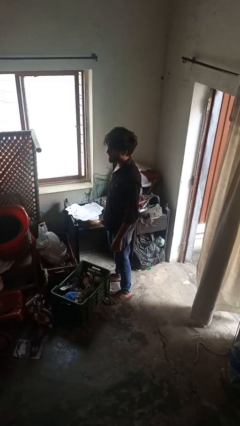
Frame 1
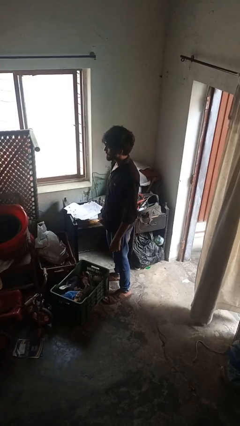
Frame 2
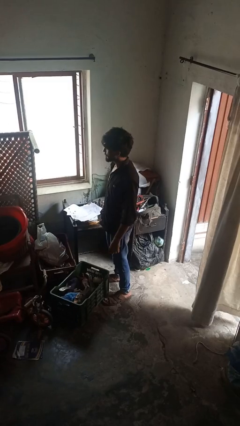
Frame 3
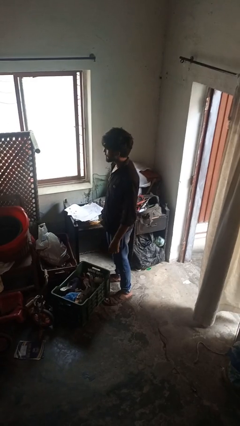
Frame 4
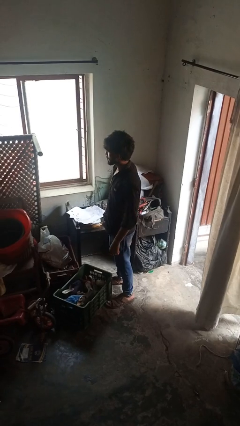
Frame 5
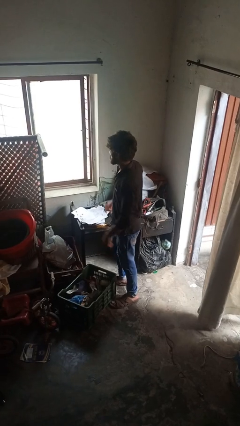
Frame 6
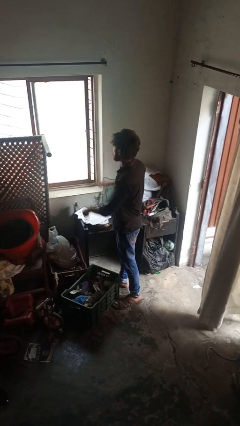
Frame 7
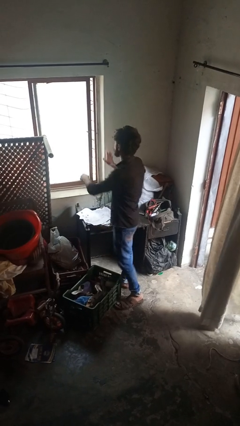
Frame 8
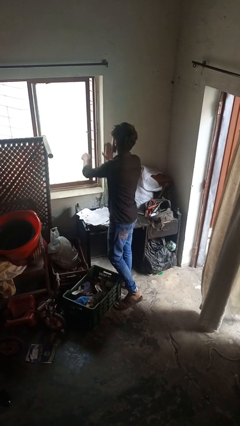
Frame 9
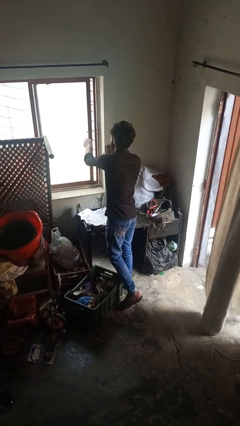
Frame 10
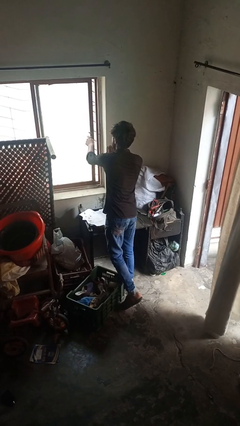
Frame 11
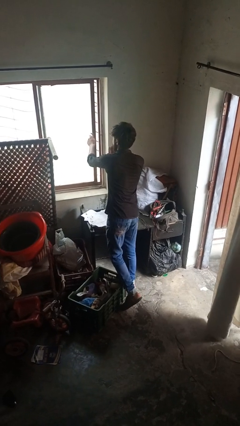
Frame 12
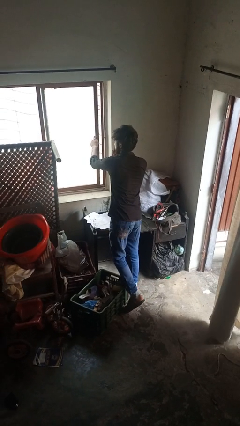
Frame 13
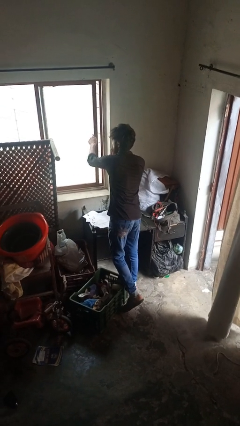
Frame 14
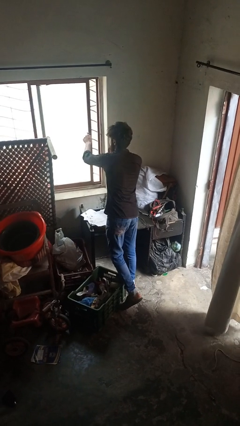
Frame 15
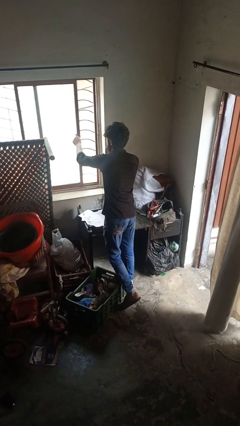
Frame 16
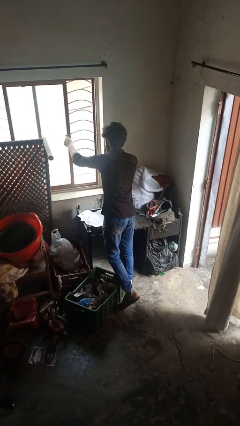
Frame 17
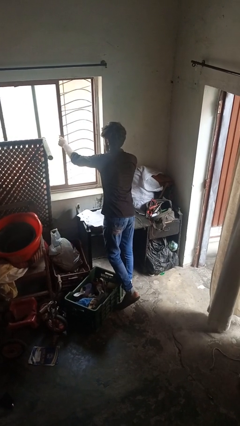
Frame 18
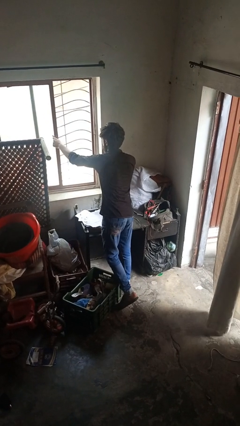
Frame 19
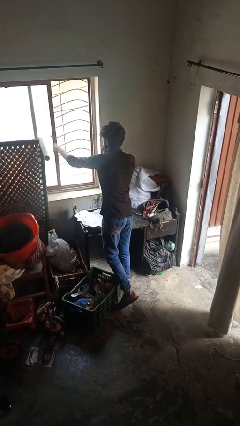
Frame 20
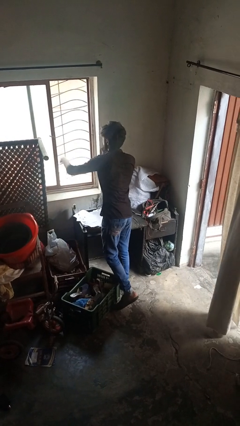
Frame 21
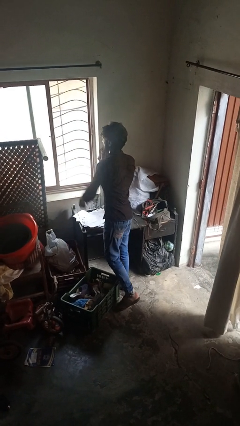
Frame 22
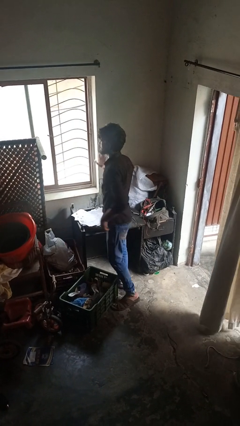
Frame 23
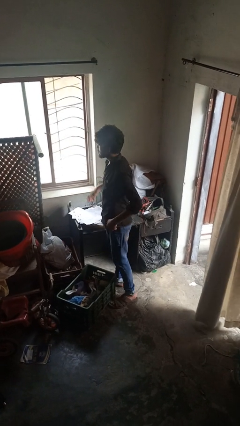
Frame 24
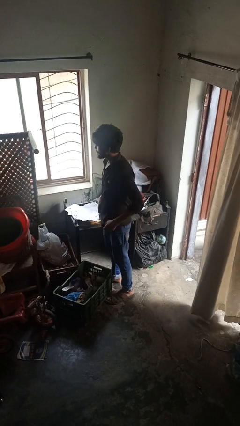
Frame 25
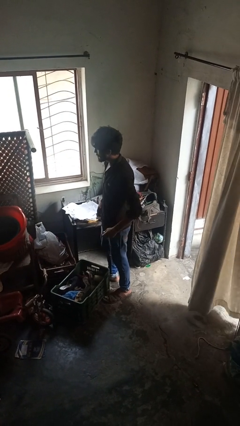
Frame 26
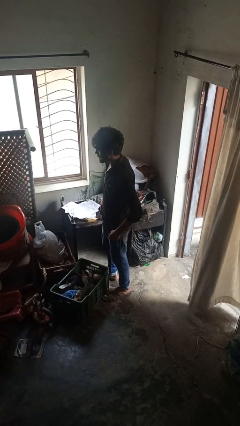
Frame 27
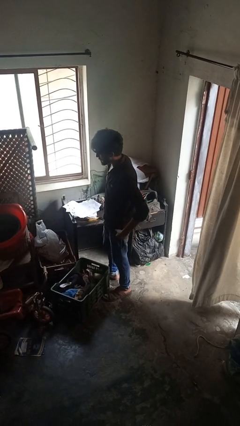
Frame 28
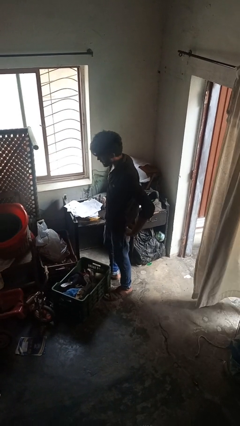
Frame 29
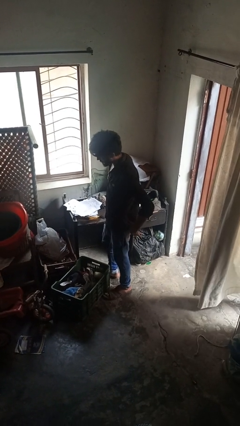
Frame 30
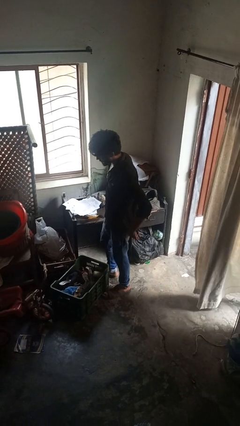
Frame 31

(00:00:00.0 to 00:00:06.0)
person opens home window

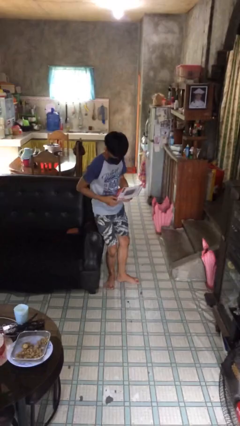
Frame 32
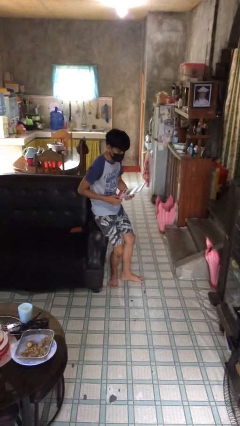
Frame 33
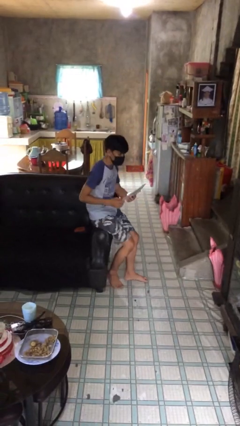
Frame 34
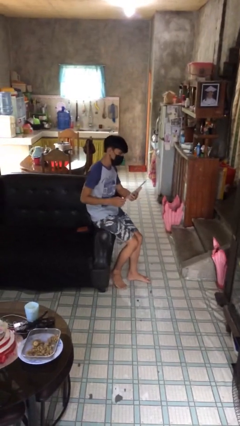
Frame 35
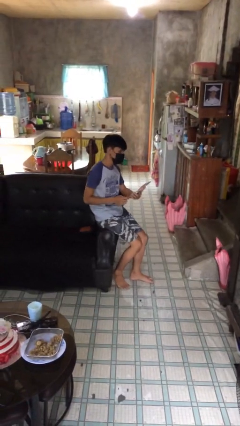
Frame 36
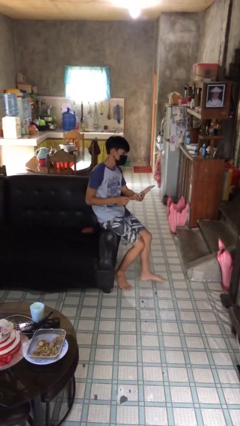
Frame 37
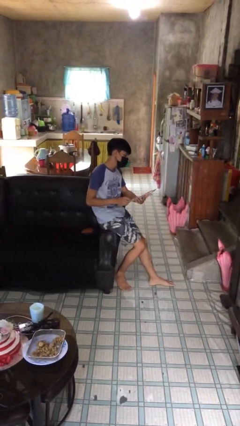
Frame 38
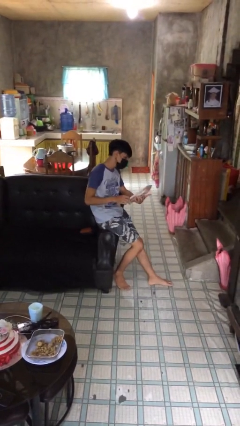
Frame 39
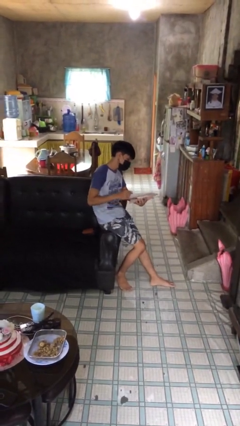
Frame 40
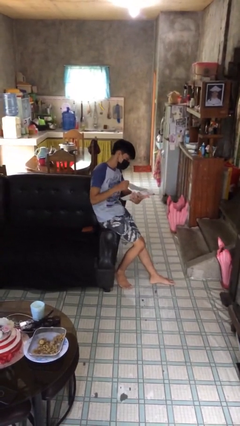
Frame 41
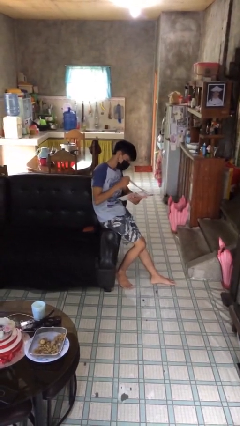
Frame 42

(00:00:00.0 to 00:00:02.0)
person sits down

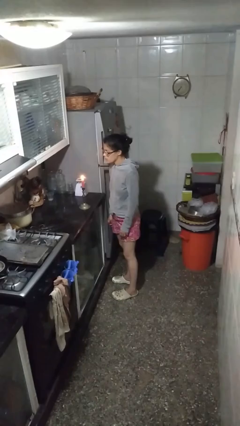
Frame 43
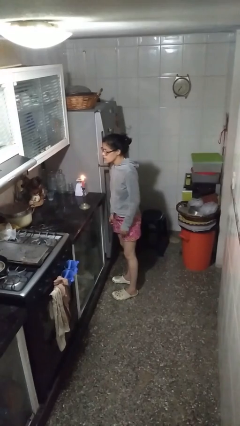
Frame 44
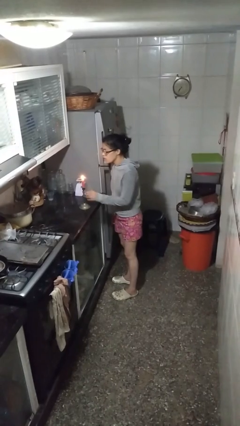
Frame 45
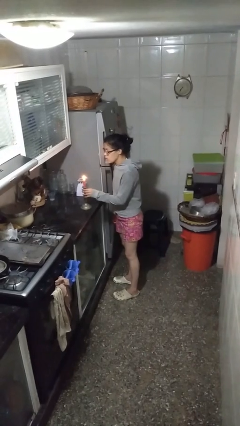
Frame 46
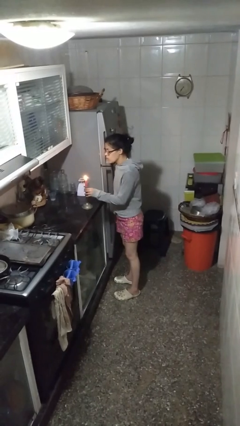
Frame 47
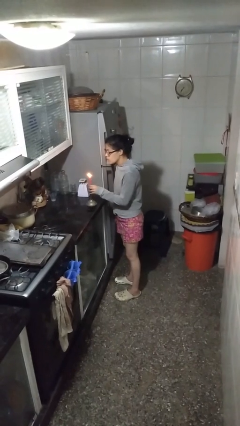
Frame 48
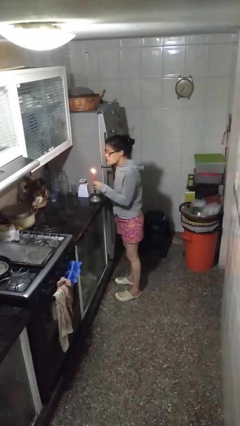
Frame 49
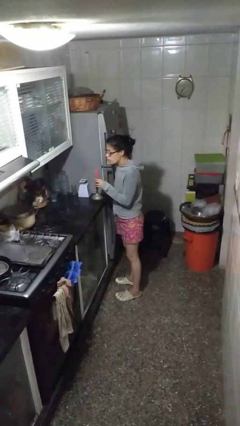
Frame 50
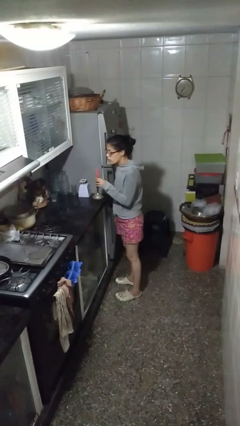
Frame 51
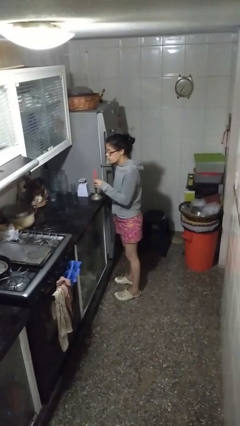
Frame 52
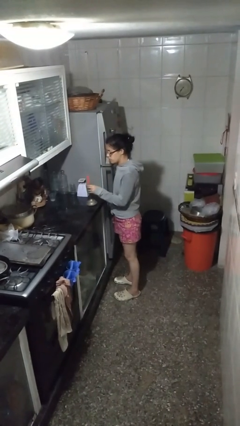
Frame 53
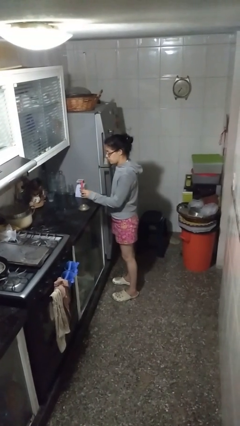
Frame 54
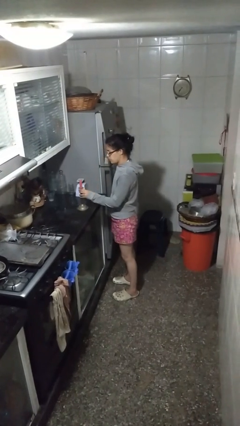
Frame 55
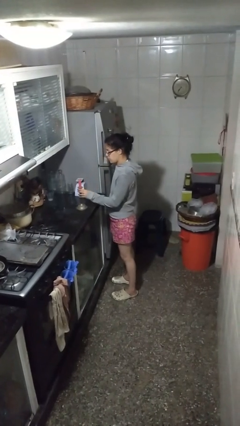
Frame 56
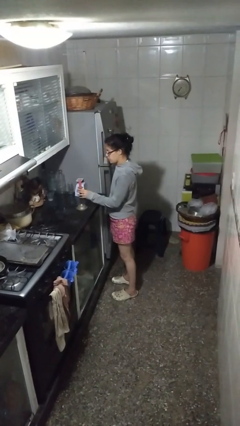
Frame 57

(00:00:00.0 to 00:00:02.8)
person extinguishes candle

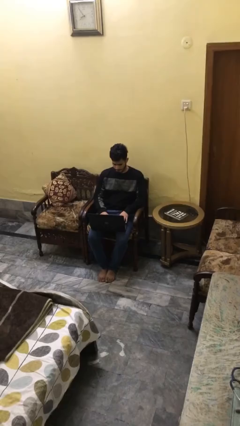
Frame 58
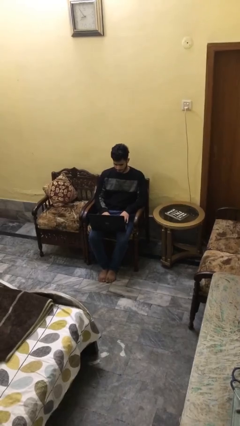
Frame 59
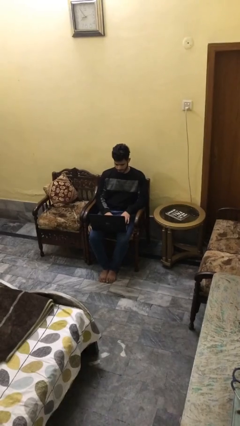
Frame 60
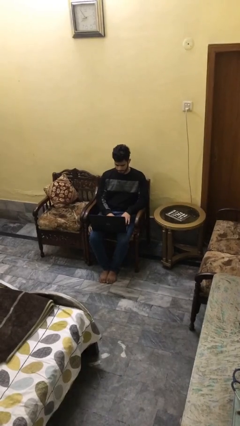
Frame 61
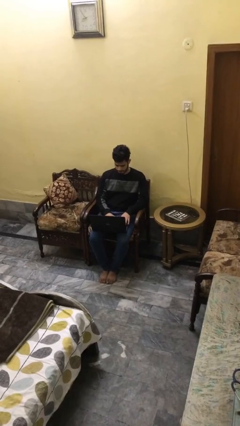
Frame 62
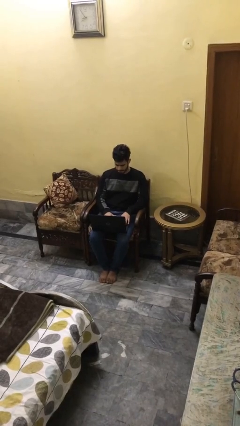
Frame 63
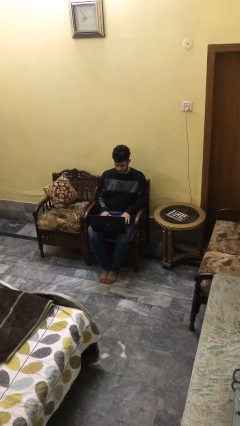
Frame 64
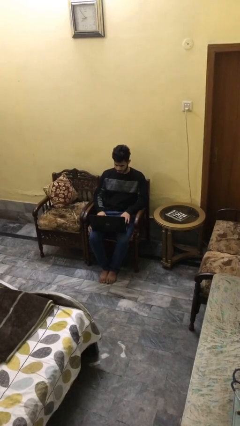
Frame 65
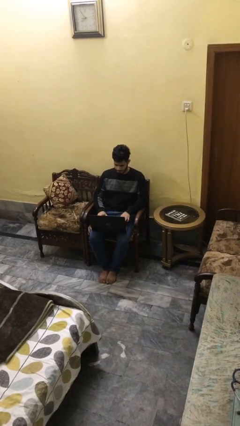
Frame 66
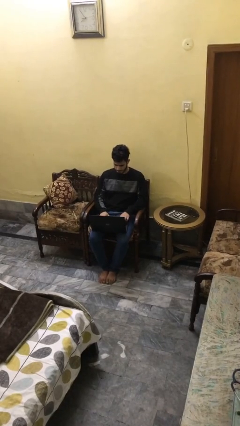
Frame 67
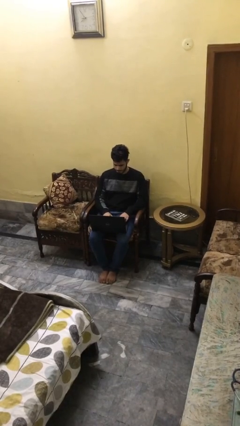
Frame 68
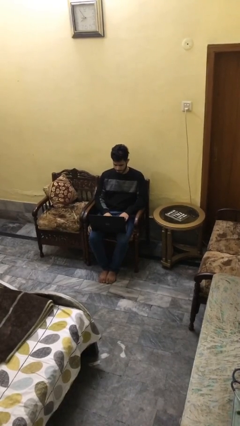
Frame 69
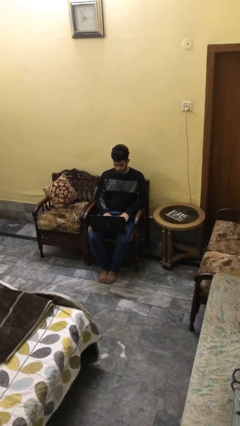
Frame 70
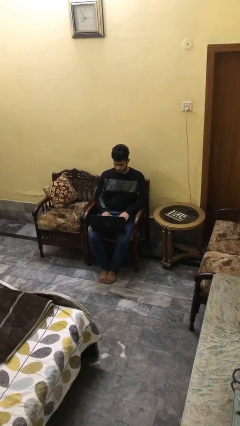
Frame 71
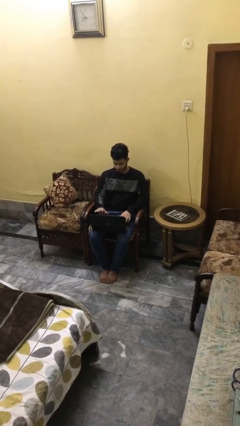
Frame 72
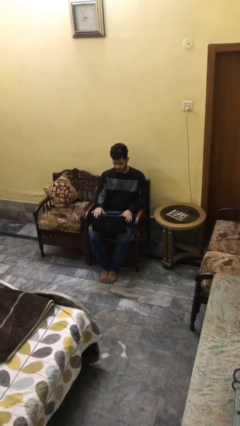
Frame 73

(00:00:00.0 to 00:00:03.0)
person interacts with laptop

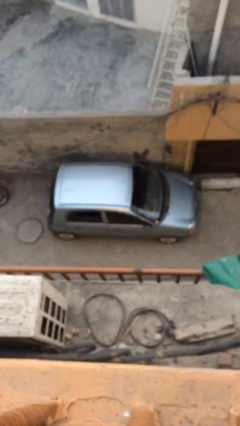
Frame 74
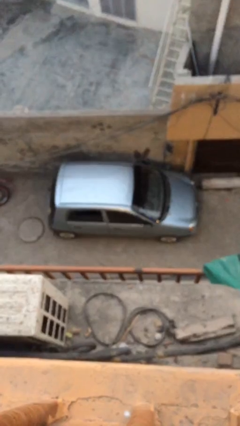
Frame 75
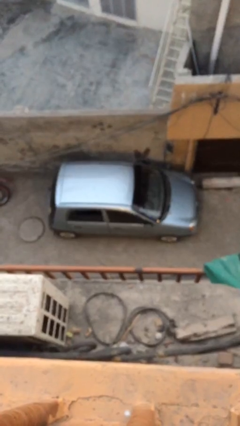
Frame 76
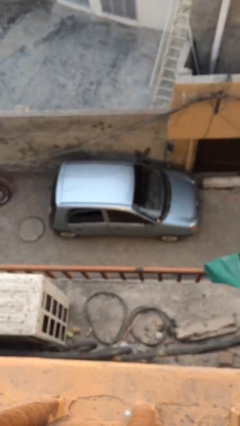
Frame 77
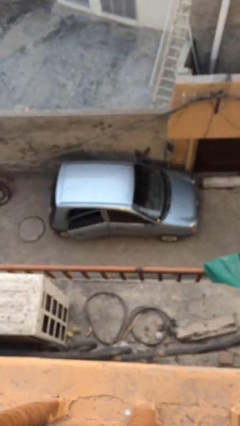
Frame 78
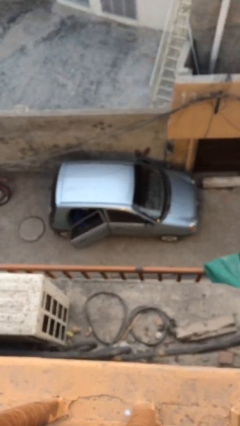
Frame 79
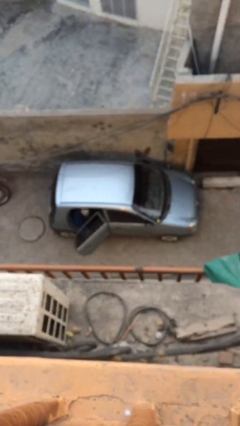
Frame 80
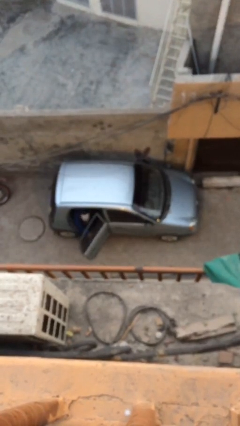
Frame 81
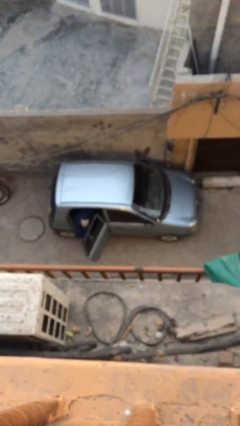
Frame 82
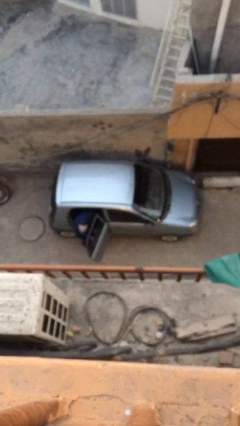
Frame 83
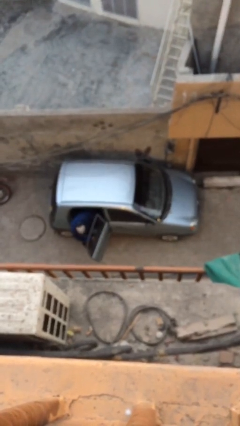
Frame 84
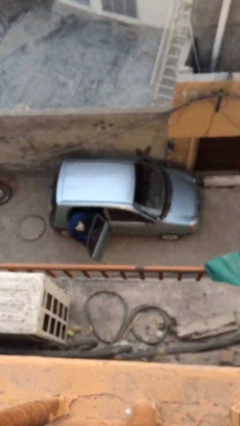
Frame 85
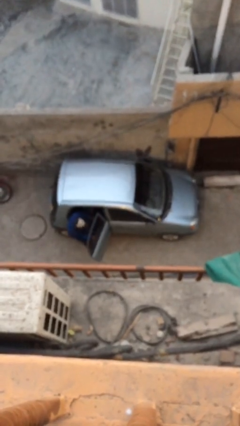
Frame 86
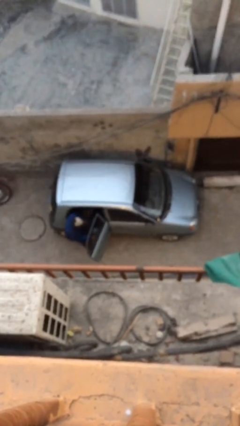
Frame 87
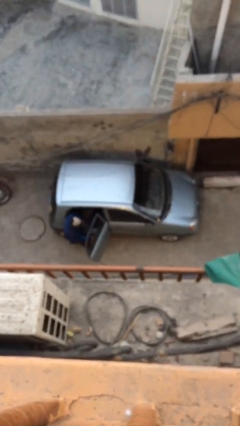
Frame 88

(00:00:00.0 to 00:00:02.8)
car drops off person

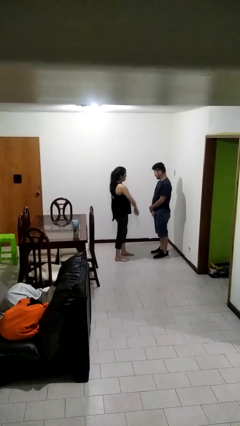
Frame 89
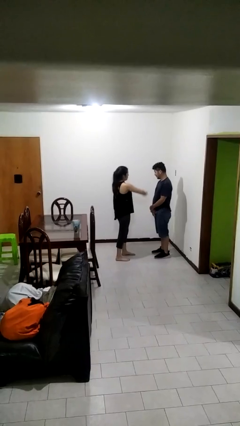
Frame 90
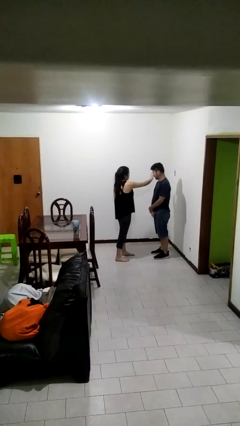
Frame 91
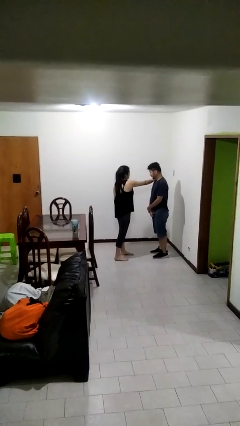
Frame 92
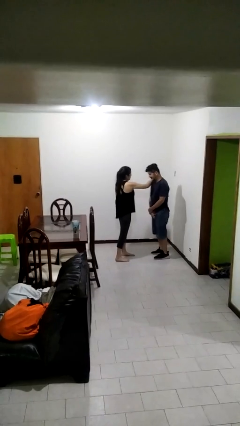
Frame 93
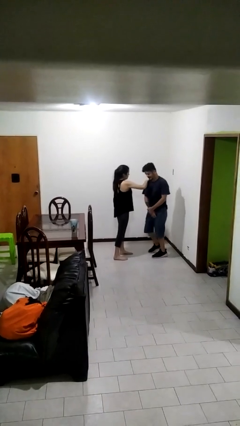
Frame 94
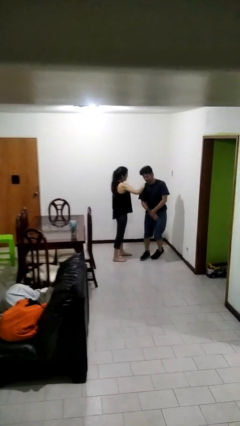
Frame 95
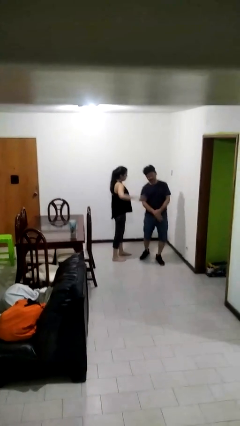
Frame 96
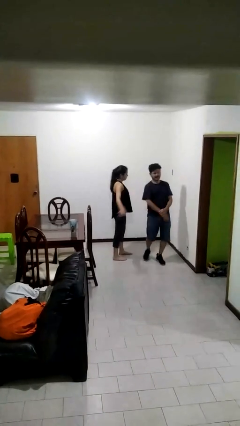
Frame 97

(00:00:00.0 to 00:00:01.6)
person shoves person
